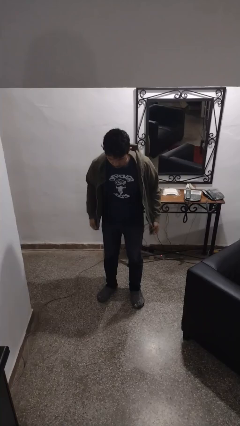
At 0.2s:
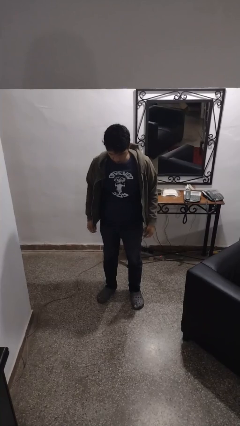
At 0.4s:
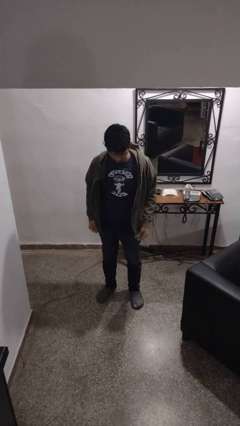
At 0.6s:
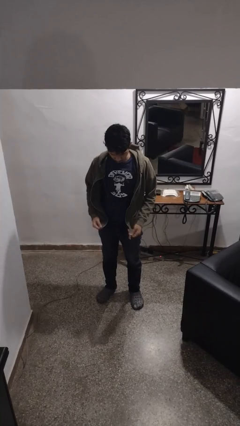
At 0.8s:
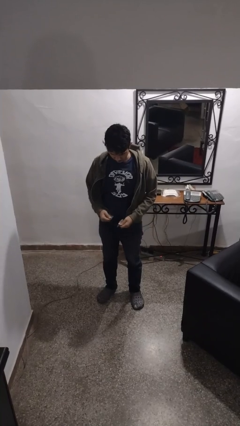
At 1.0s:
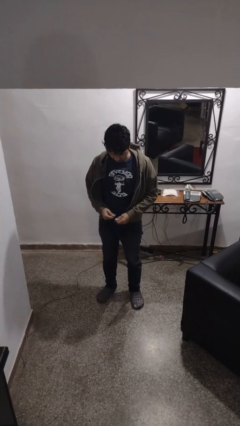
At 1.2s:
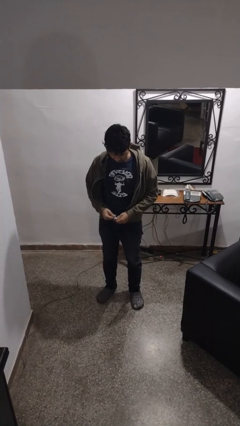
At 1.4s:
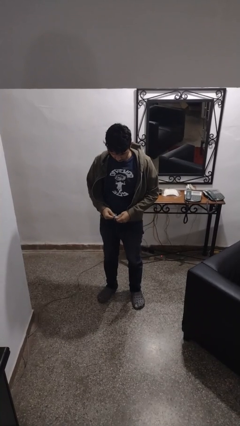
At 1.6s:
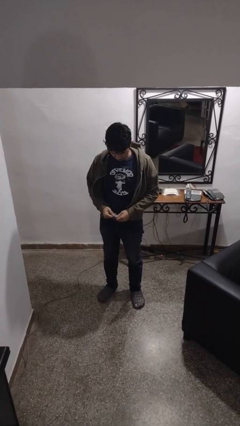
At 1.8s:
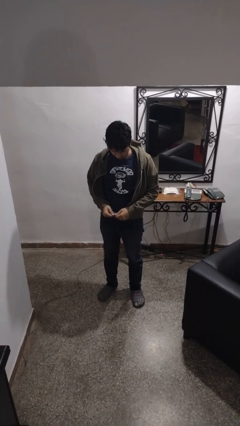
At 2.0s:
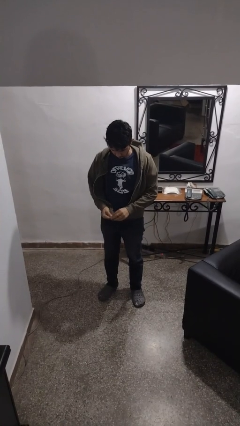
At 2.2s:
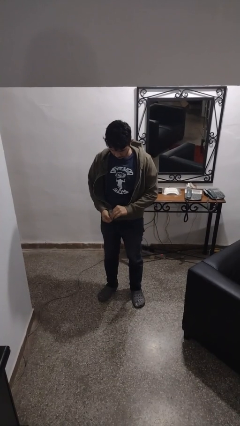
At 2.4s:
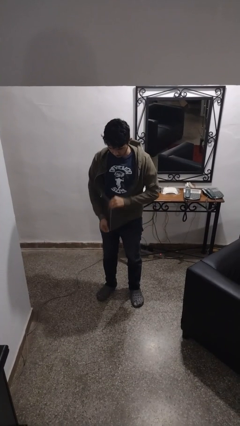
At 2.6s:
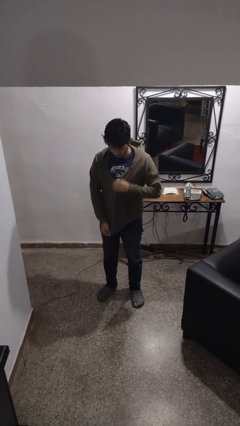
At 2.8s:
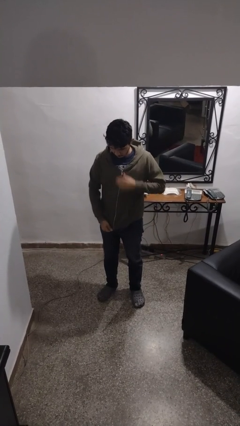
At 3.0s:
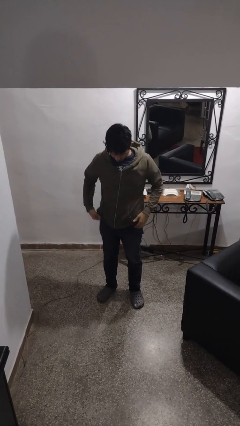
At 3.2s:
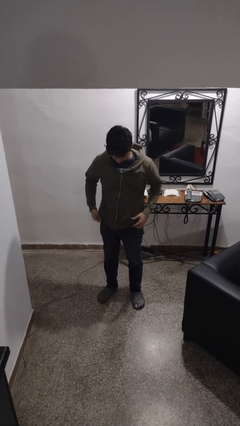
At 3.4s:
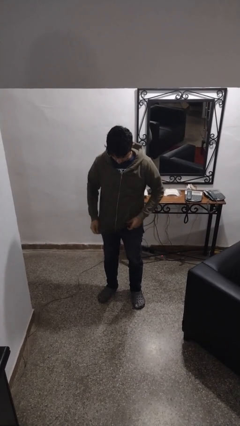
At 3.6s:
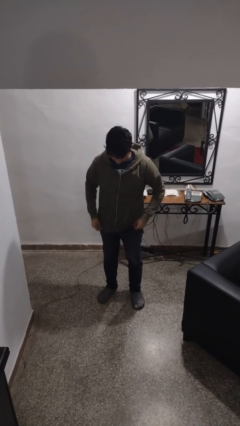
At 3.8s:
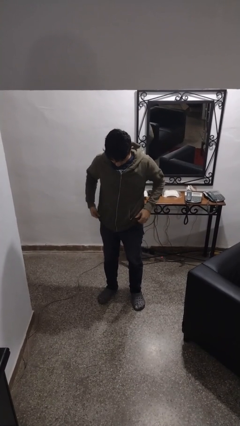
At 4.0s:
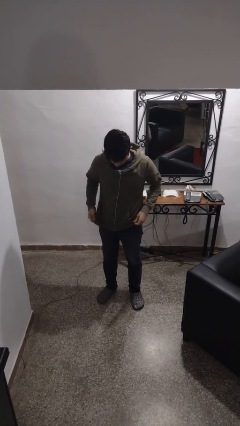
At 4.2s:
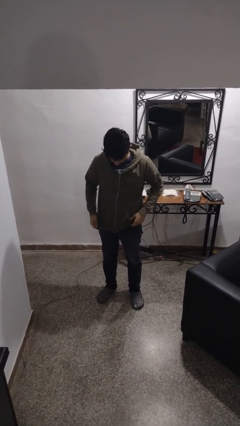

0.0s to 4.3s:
person zips up jacket

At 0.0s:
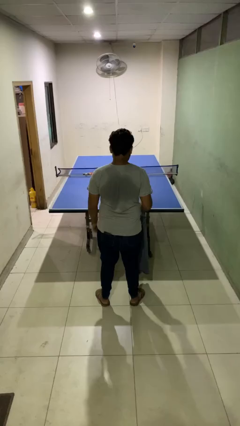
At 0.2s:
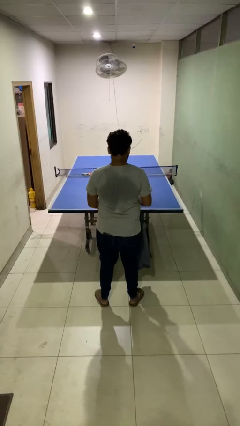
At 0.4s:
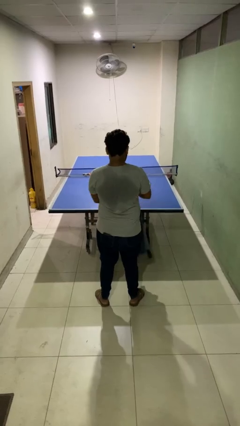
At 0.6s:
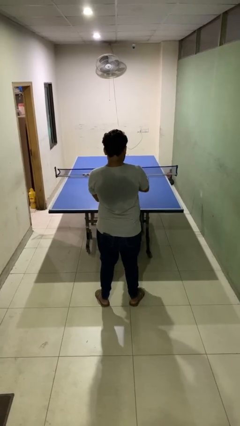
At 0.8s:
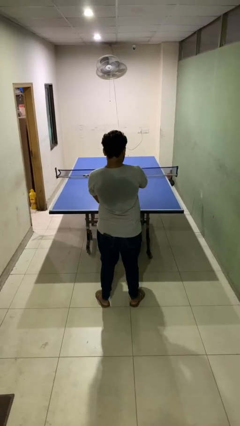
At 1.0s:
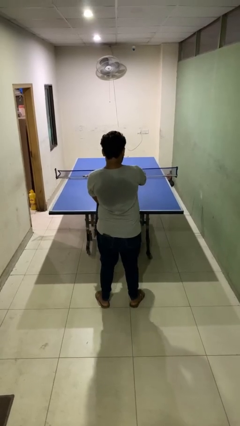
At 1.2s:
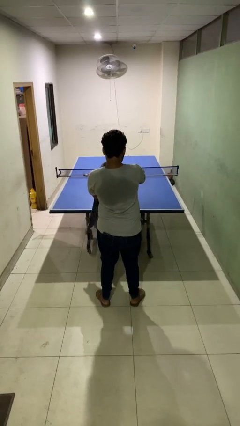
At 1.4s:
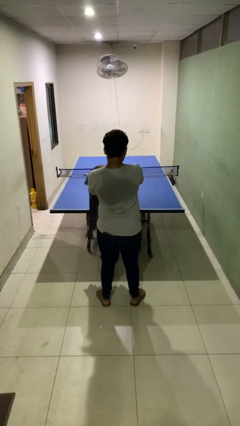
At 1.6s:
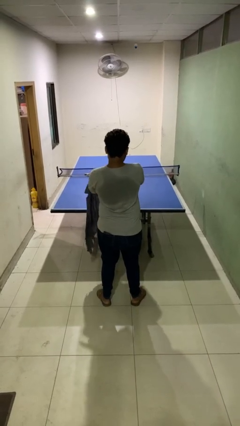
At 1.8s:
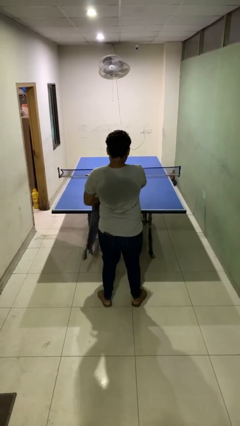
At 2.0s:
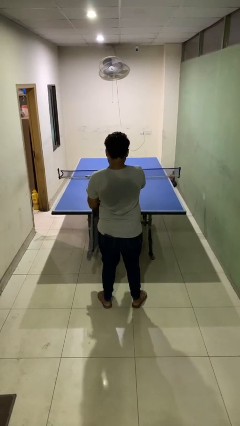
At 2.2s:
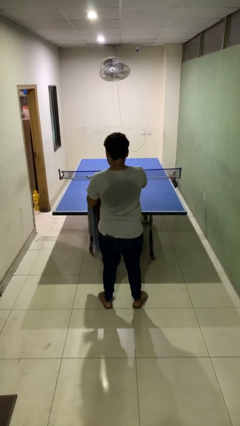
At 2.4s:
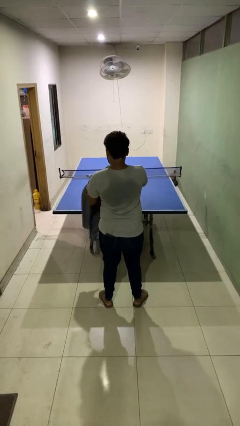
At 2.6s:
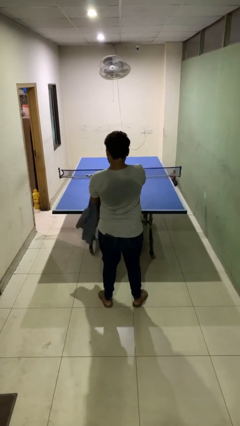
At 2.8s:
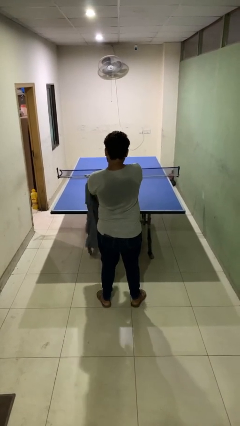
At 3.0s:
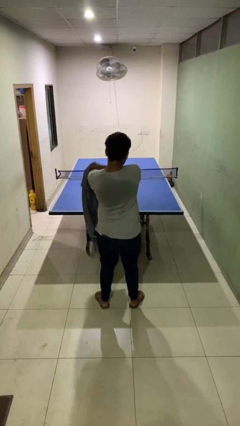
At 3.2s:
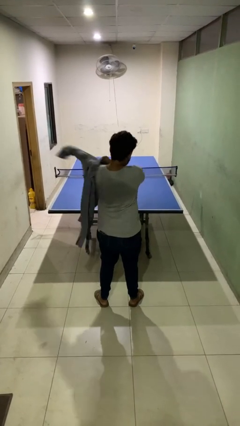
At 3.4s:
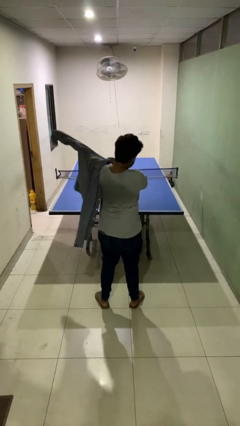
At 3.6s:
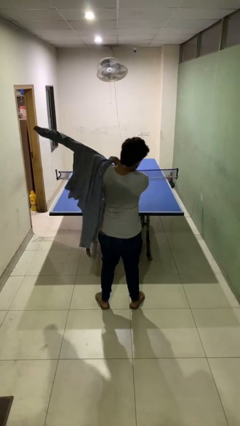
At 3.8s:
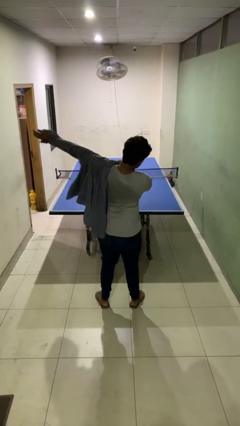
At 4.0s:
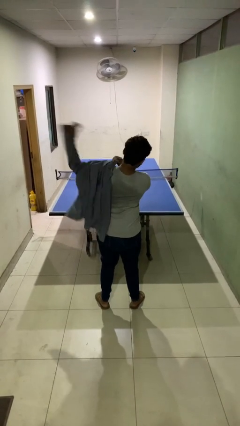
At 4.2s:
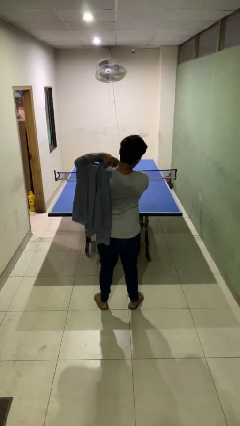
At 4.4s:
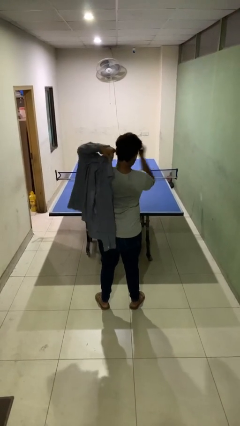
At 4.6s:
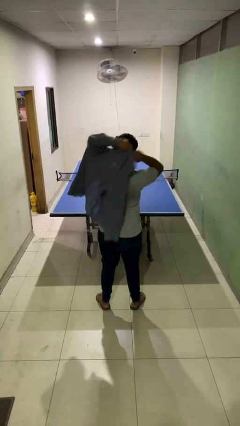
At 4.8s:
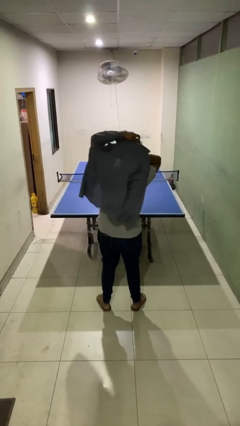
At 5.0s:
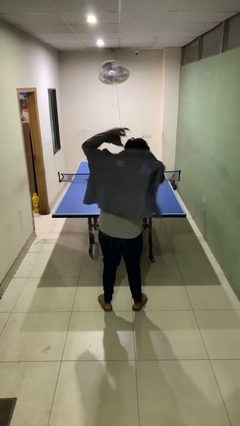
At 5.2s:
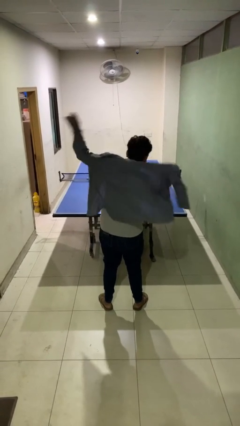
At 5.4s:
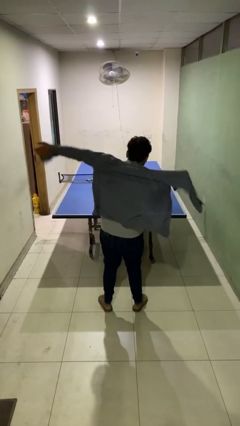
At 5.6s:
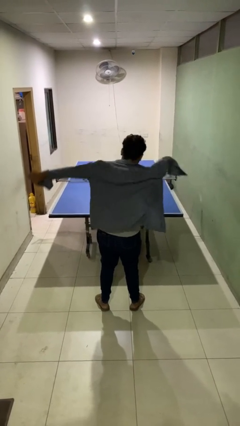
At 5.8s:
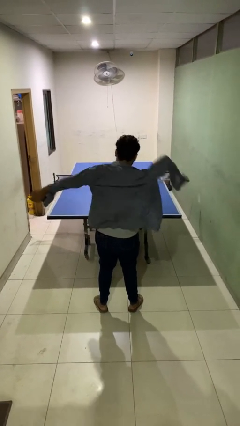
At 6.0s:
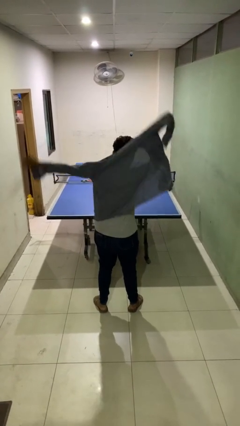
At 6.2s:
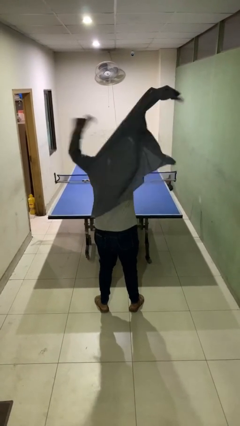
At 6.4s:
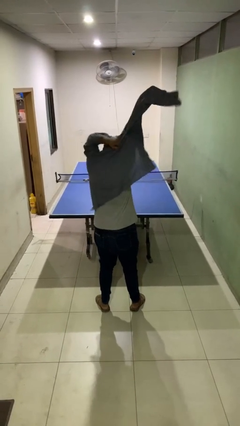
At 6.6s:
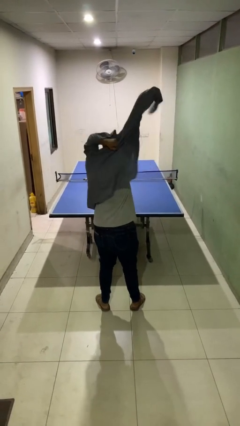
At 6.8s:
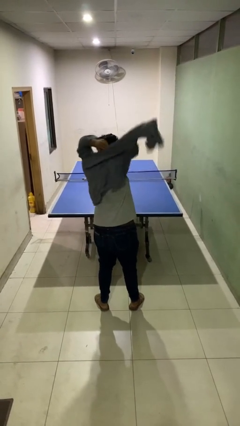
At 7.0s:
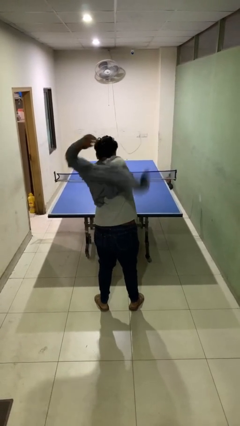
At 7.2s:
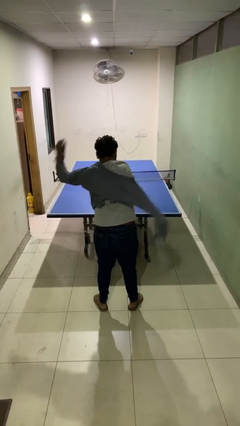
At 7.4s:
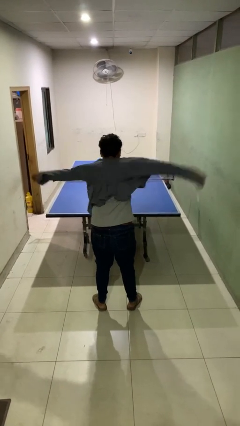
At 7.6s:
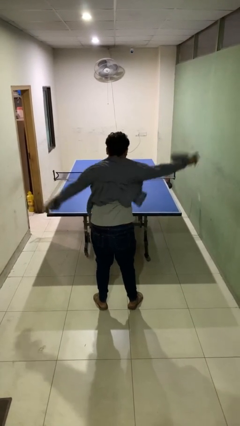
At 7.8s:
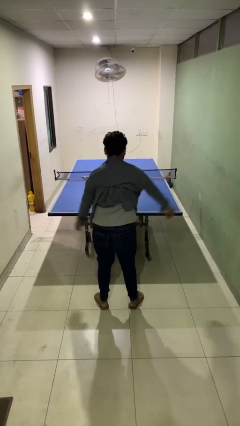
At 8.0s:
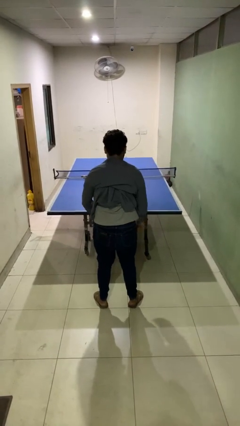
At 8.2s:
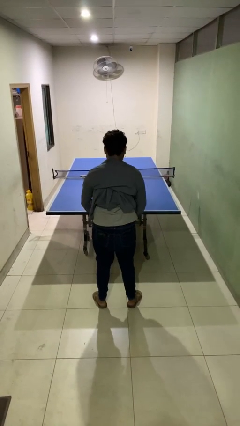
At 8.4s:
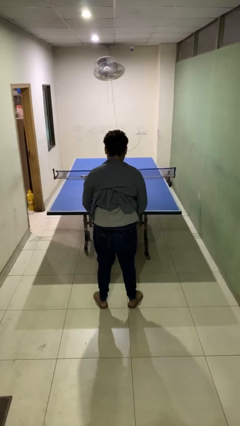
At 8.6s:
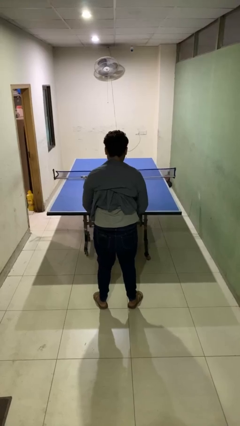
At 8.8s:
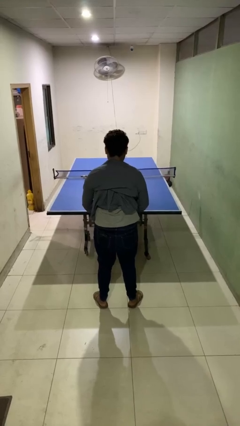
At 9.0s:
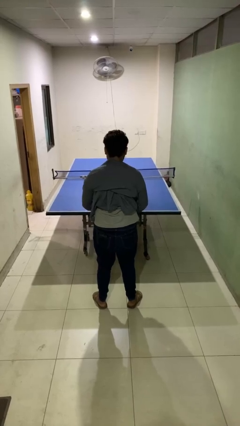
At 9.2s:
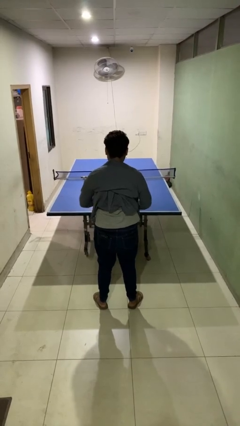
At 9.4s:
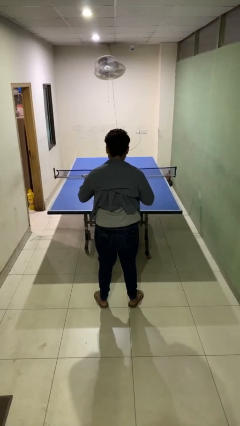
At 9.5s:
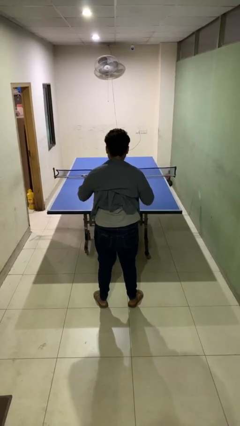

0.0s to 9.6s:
person puts on shirt

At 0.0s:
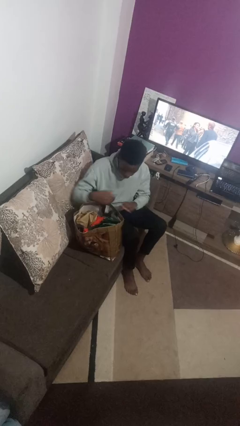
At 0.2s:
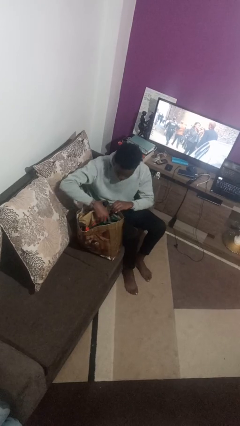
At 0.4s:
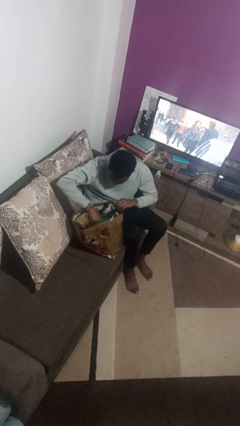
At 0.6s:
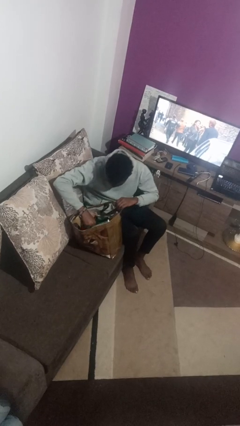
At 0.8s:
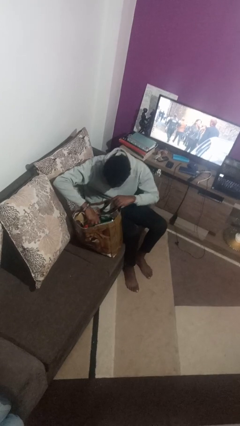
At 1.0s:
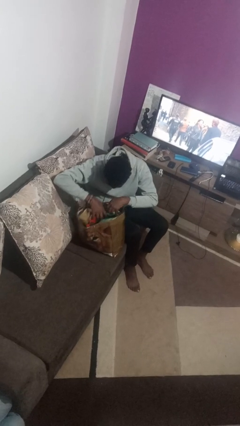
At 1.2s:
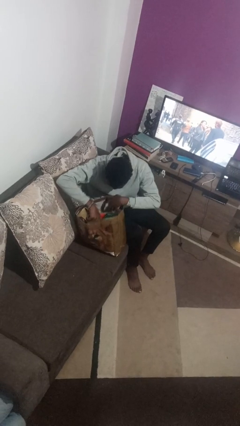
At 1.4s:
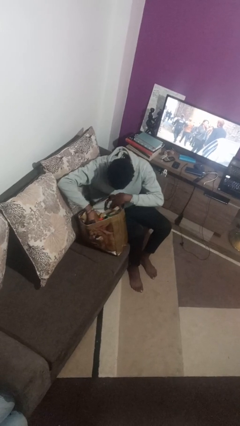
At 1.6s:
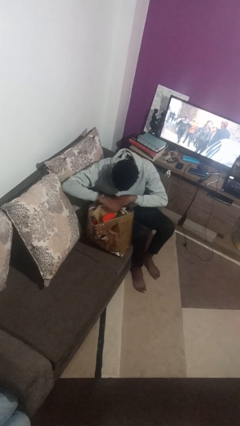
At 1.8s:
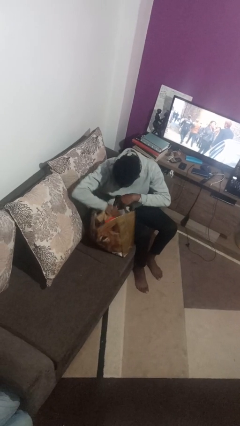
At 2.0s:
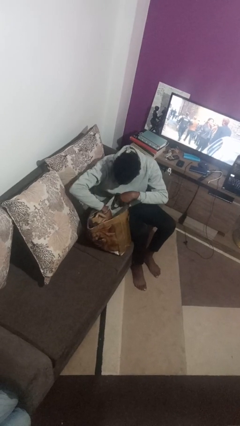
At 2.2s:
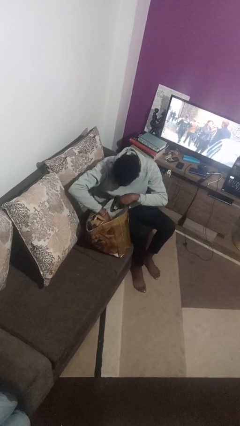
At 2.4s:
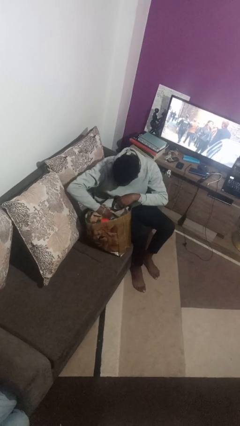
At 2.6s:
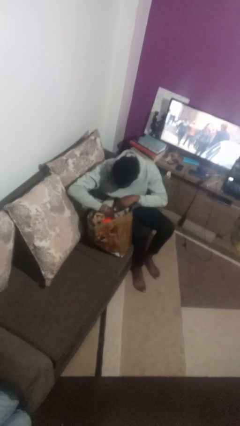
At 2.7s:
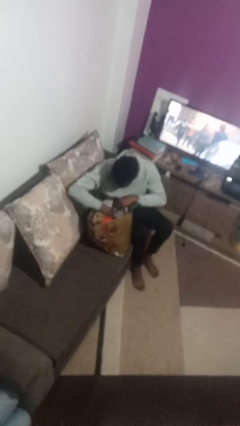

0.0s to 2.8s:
person searches in bag

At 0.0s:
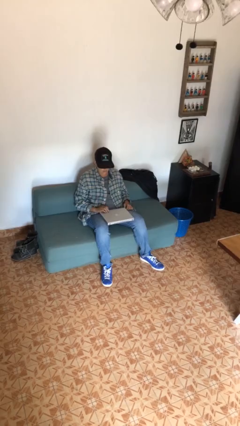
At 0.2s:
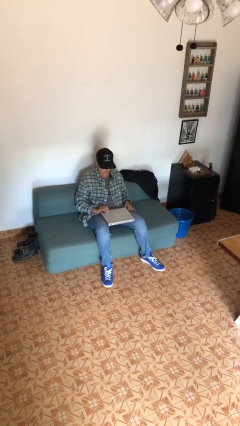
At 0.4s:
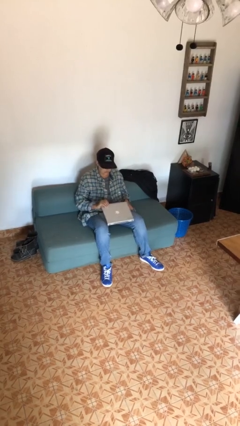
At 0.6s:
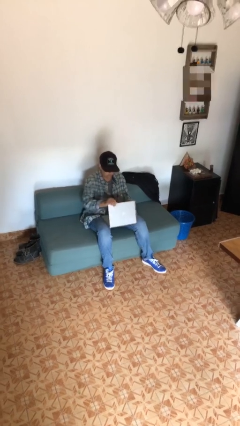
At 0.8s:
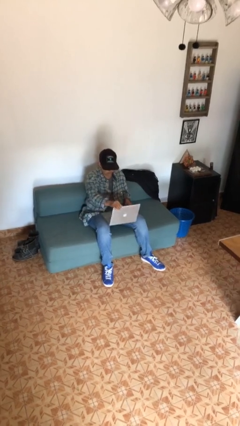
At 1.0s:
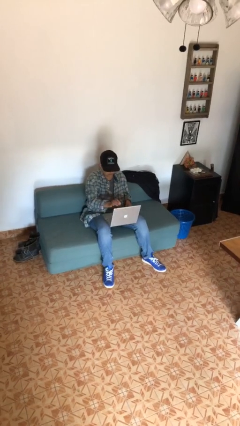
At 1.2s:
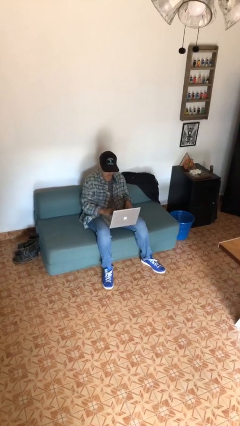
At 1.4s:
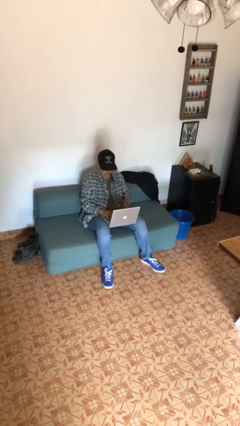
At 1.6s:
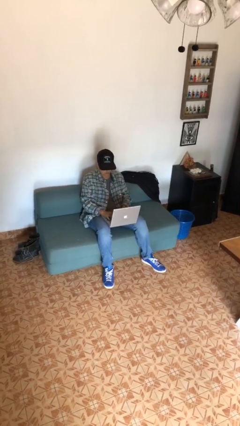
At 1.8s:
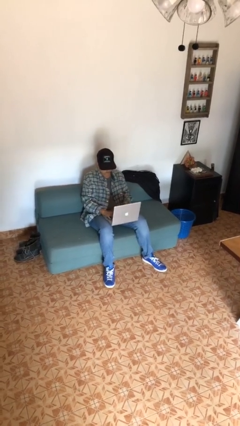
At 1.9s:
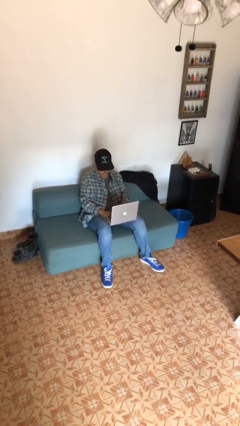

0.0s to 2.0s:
person opens laptop
